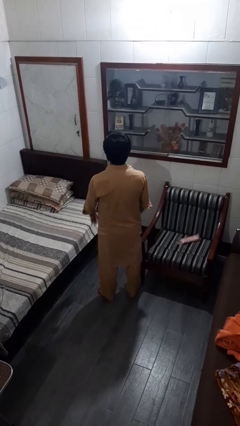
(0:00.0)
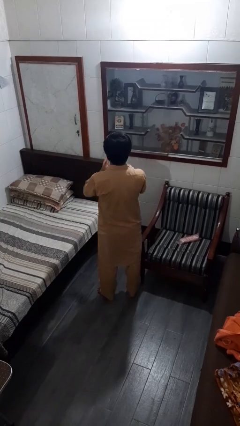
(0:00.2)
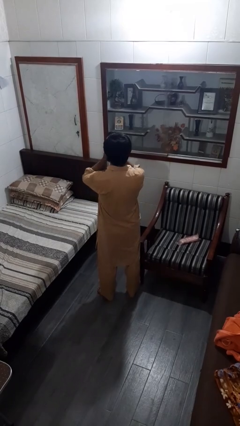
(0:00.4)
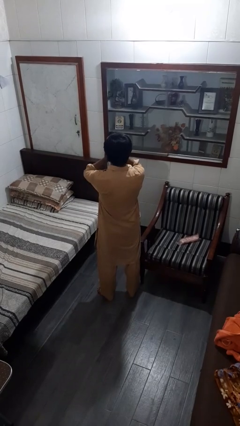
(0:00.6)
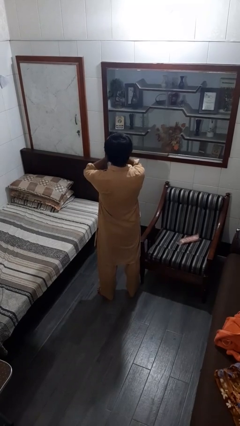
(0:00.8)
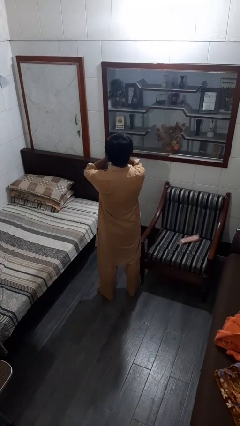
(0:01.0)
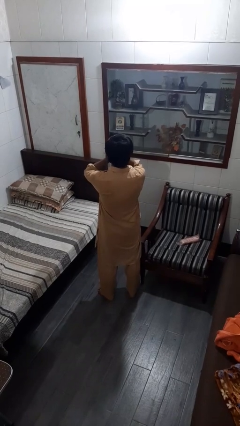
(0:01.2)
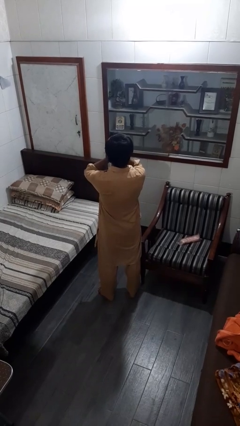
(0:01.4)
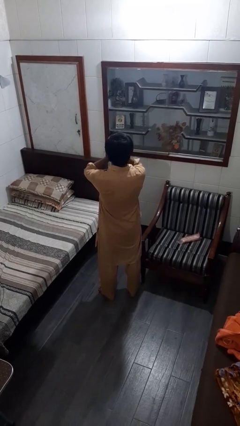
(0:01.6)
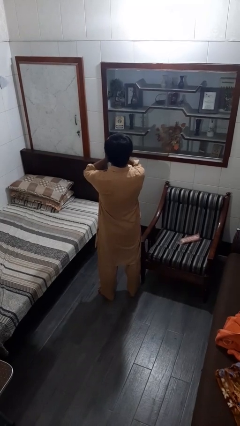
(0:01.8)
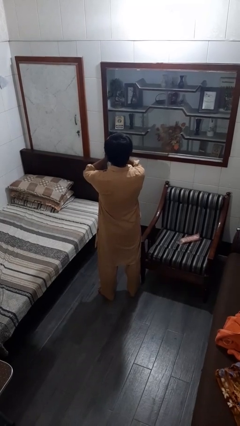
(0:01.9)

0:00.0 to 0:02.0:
person covers face with hands

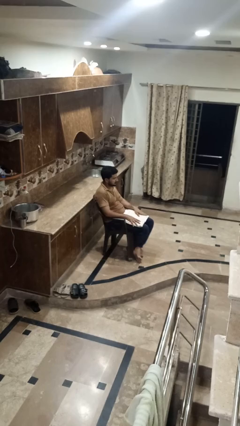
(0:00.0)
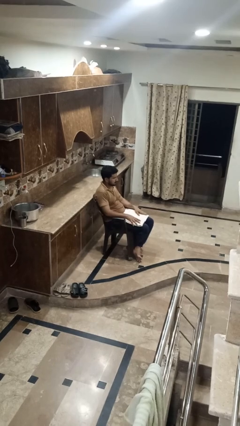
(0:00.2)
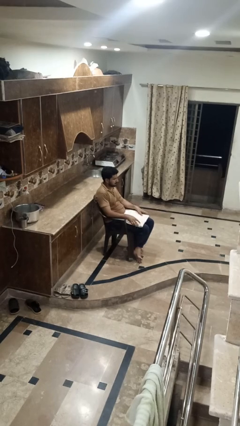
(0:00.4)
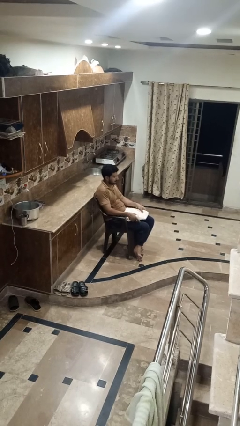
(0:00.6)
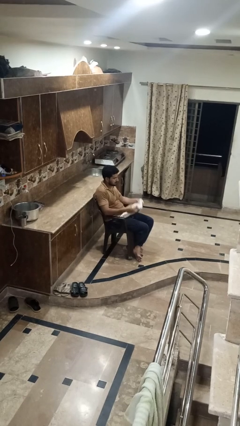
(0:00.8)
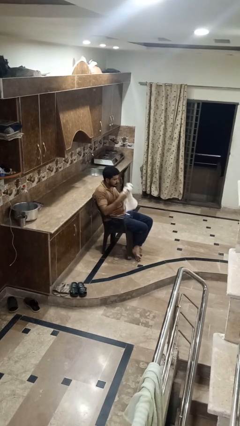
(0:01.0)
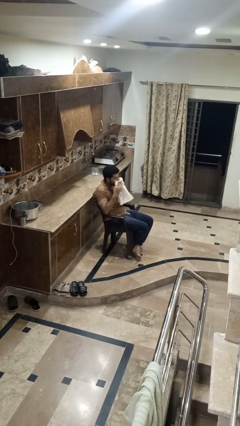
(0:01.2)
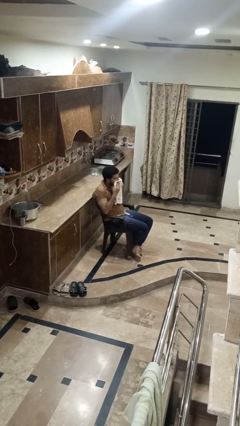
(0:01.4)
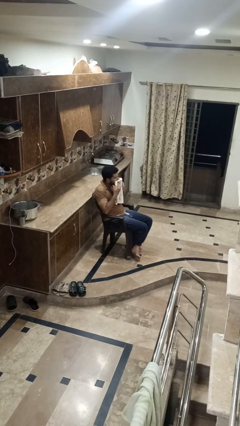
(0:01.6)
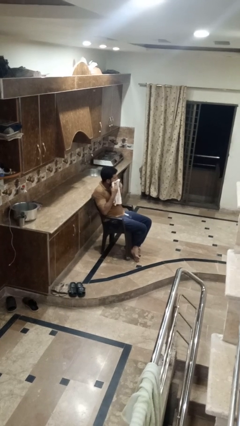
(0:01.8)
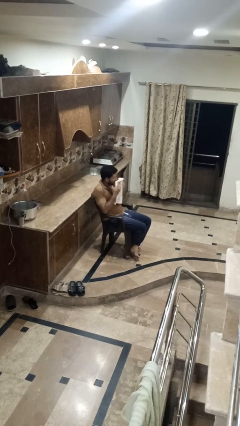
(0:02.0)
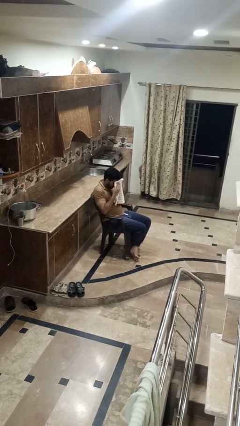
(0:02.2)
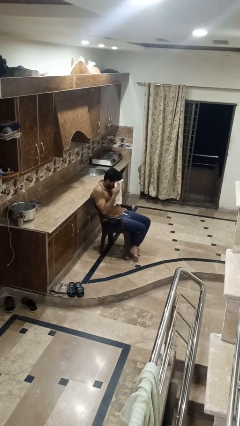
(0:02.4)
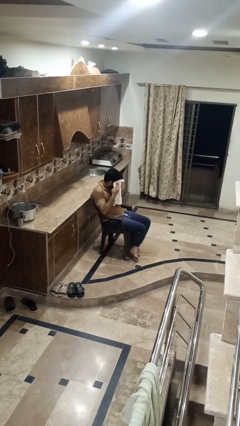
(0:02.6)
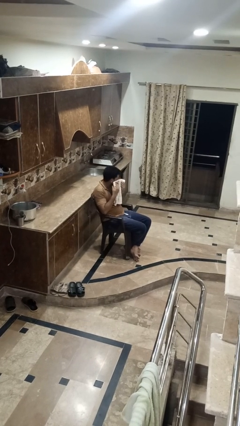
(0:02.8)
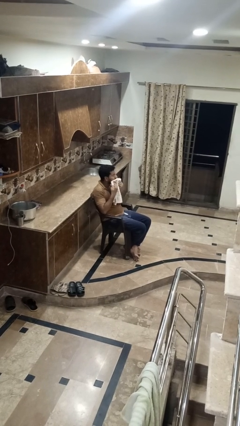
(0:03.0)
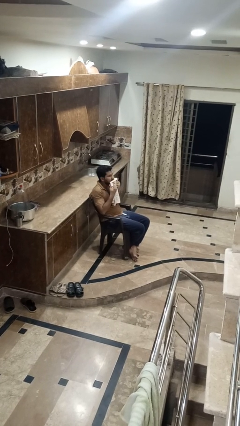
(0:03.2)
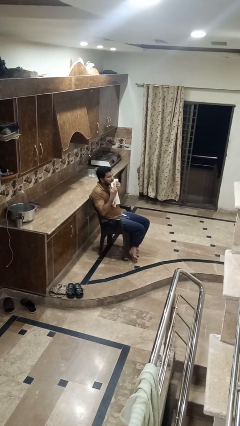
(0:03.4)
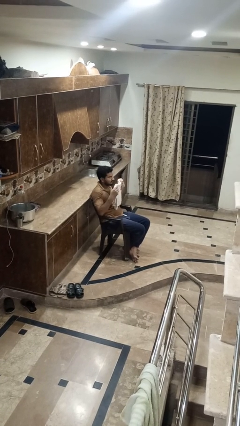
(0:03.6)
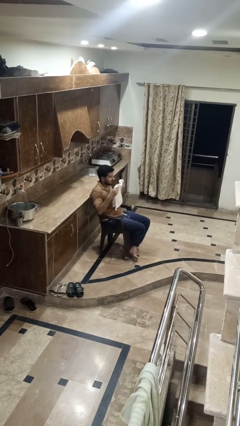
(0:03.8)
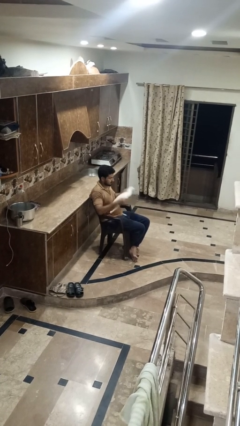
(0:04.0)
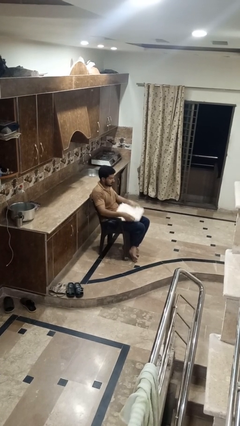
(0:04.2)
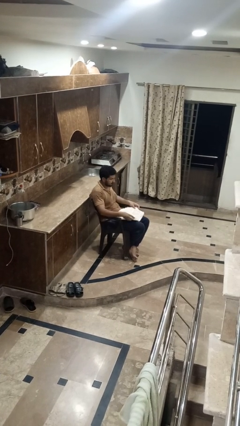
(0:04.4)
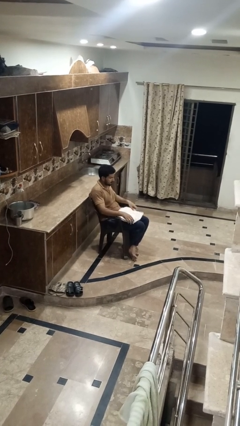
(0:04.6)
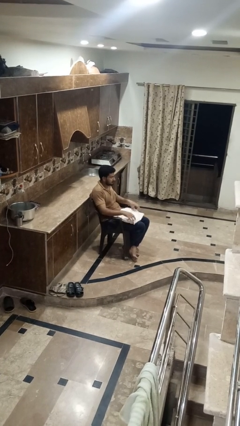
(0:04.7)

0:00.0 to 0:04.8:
person wipes mouth with napkin

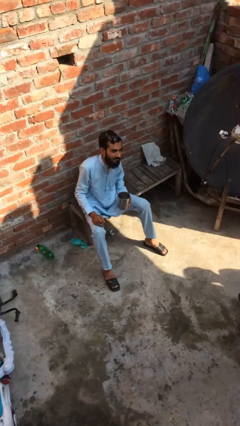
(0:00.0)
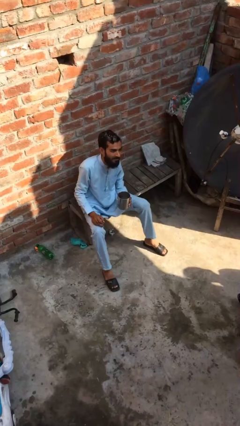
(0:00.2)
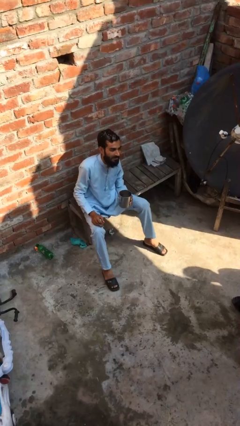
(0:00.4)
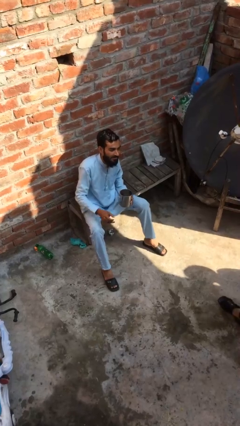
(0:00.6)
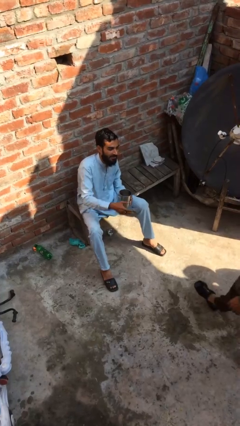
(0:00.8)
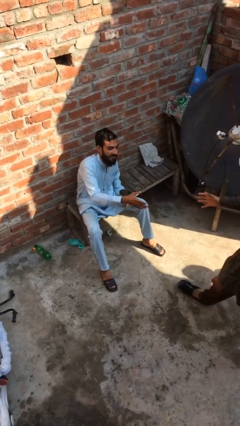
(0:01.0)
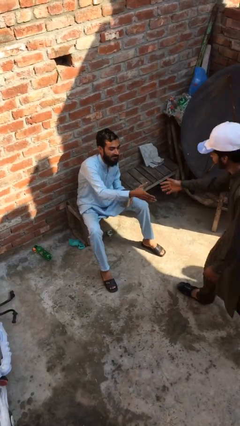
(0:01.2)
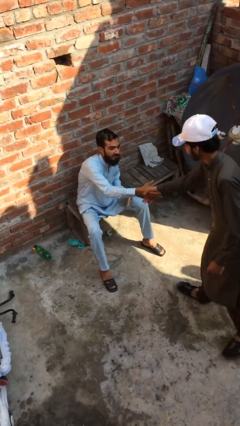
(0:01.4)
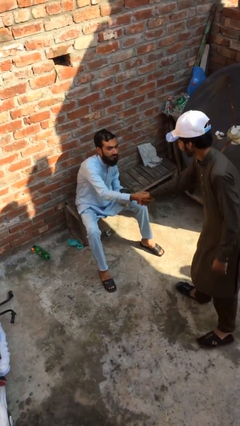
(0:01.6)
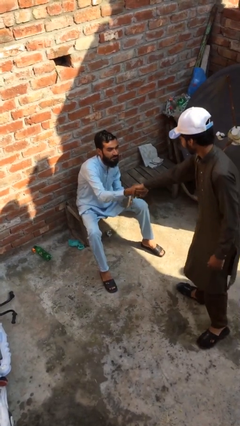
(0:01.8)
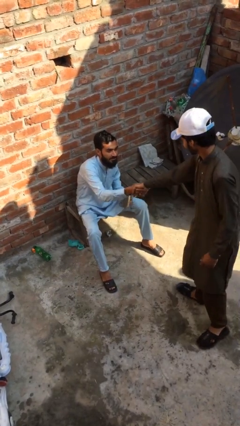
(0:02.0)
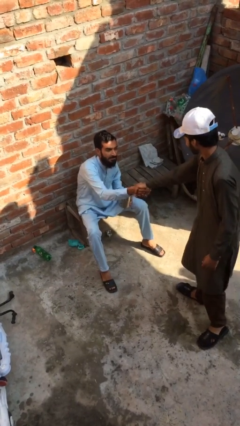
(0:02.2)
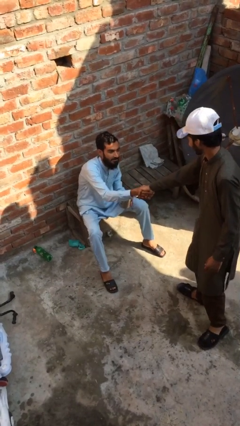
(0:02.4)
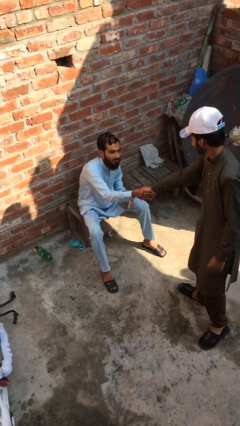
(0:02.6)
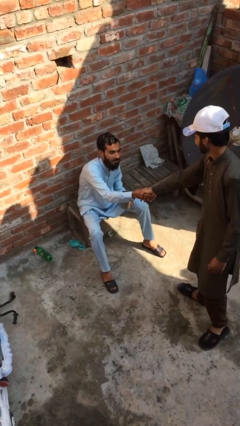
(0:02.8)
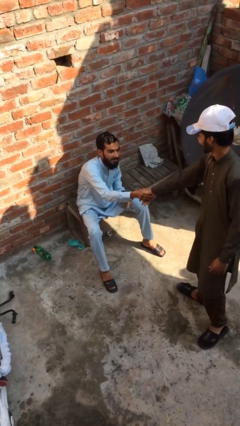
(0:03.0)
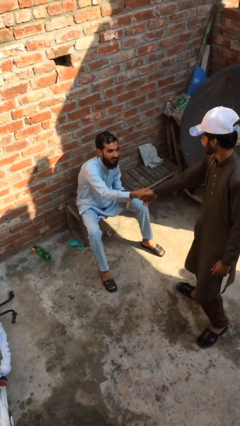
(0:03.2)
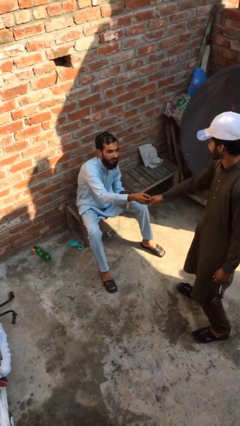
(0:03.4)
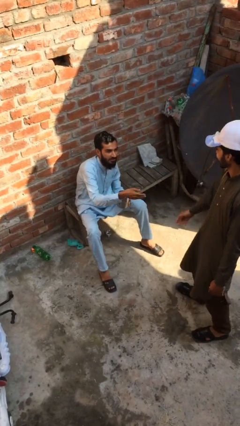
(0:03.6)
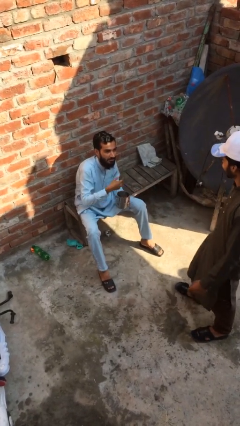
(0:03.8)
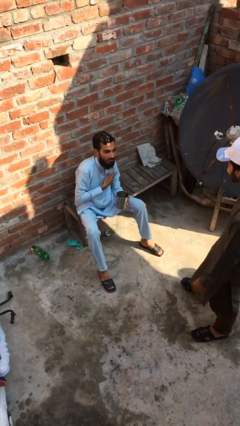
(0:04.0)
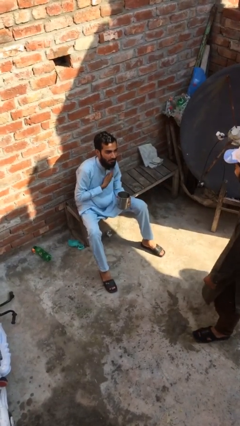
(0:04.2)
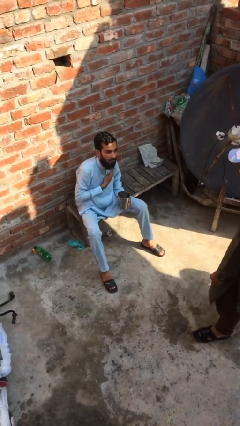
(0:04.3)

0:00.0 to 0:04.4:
person shakes hand

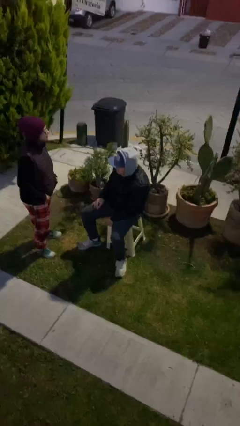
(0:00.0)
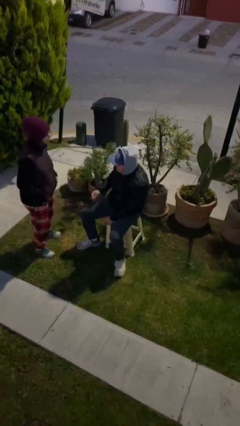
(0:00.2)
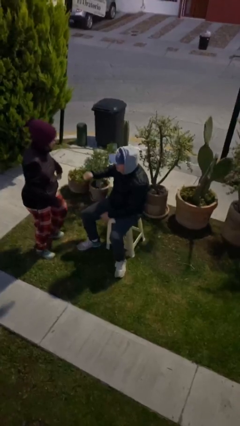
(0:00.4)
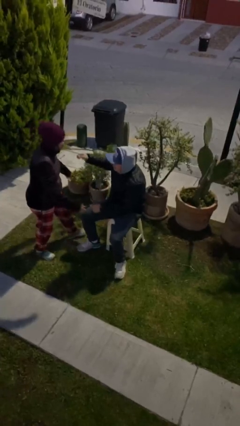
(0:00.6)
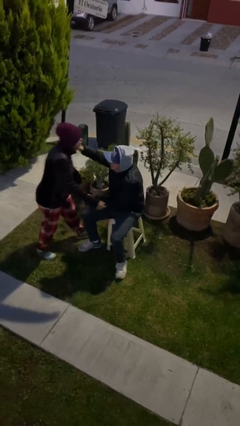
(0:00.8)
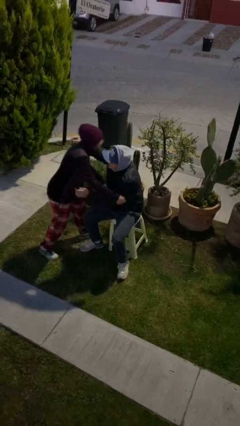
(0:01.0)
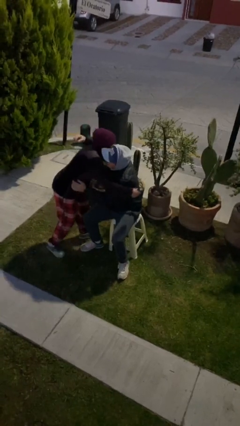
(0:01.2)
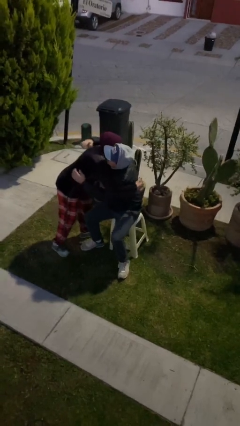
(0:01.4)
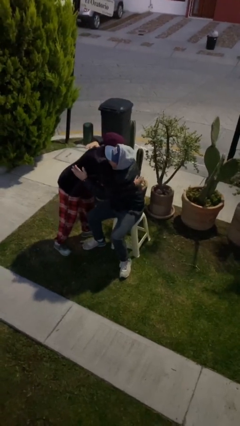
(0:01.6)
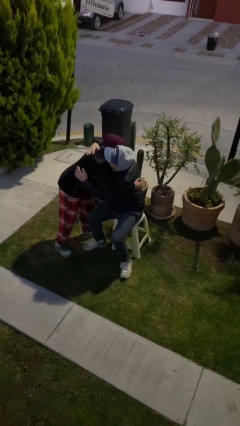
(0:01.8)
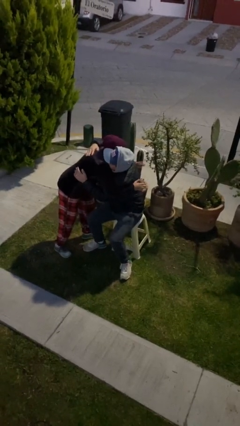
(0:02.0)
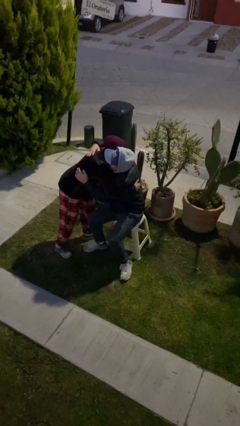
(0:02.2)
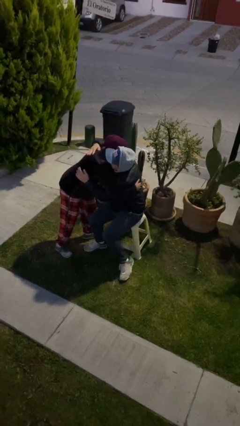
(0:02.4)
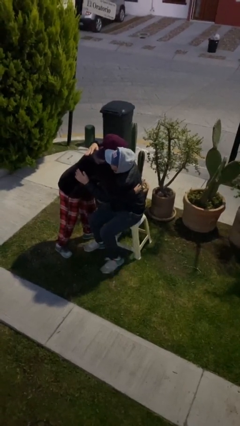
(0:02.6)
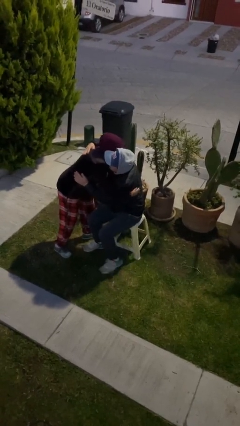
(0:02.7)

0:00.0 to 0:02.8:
person embraces person

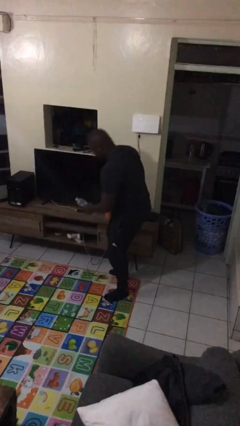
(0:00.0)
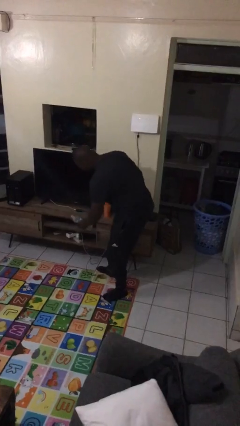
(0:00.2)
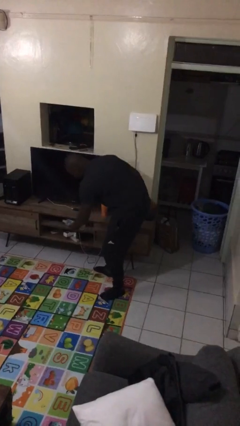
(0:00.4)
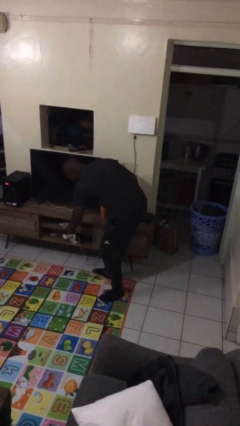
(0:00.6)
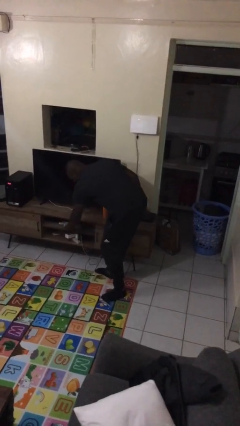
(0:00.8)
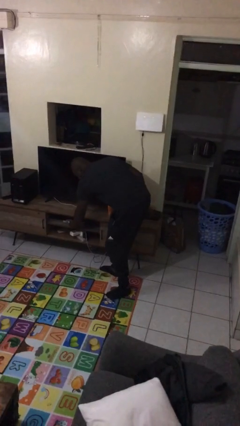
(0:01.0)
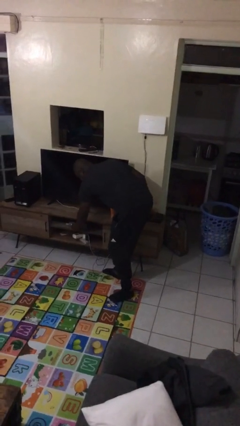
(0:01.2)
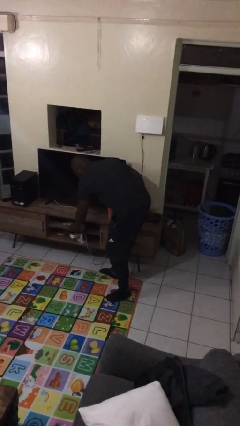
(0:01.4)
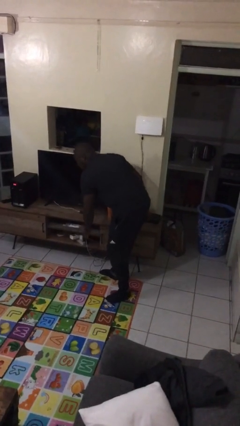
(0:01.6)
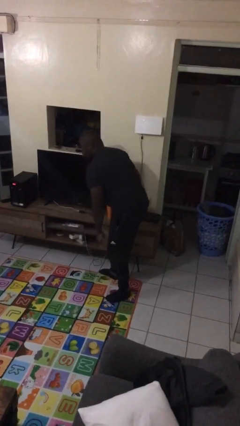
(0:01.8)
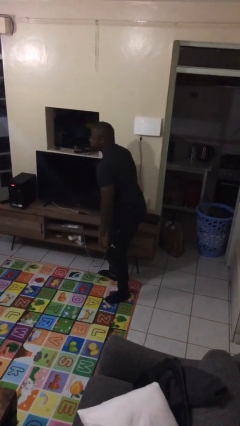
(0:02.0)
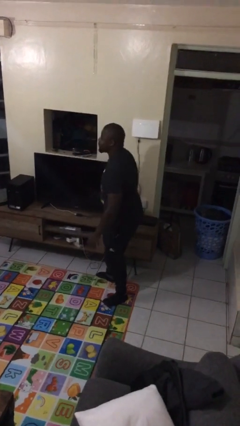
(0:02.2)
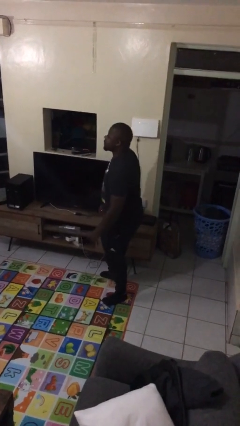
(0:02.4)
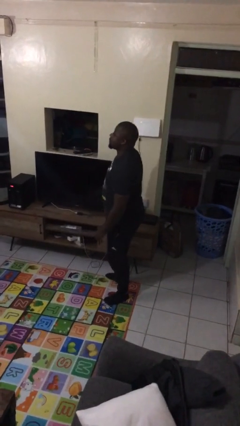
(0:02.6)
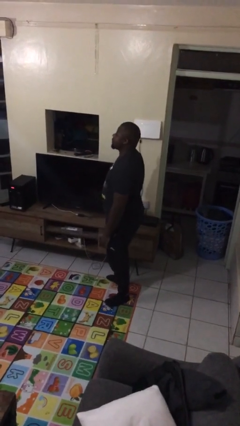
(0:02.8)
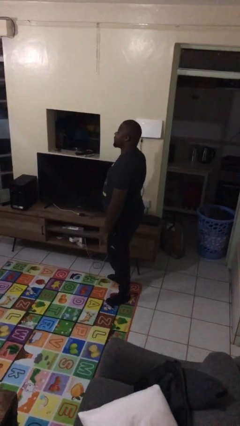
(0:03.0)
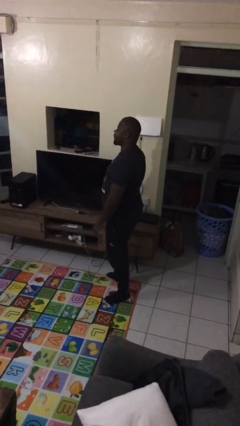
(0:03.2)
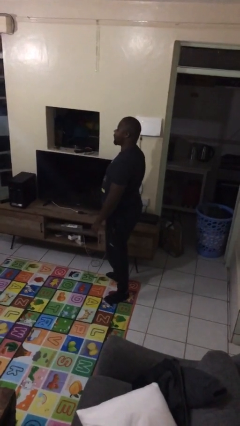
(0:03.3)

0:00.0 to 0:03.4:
person puts down object into cabinet

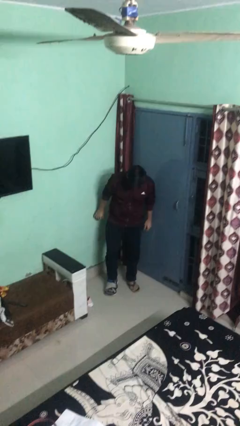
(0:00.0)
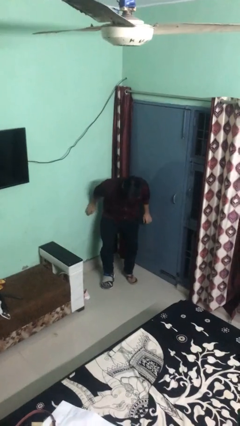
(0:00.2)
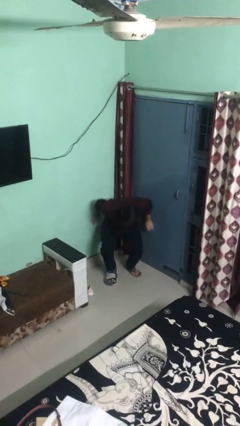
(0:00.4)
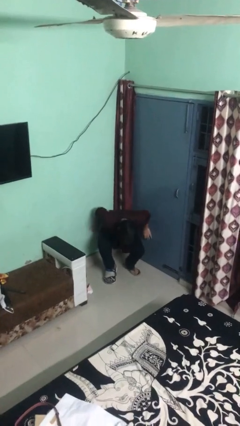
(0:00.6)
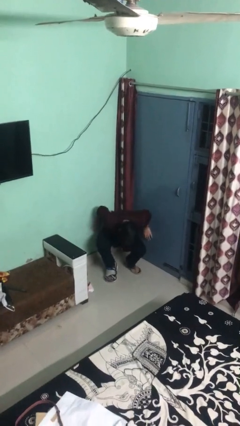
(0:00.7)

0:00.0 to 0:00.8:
person sits down
